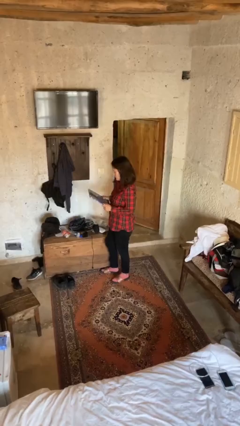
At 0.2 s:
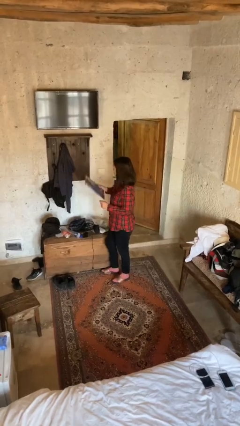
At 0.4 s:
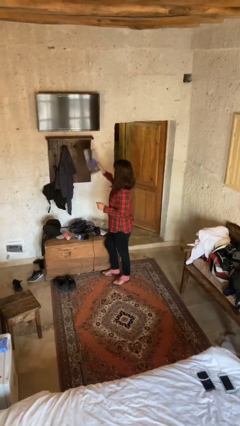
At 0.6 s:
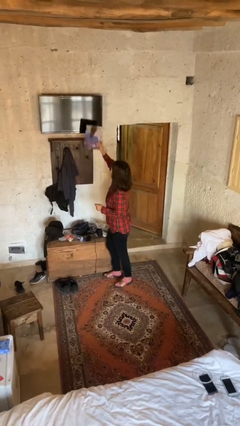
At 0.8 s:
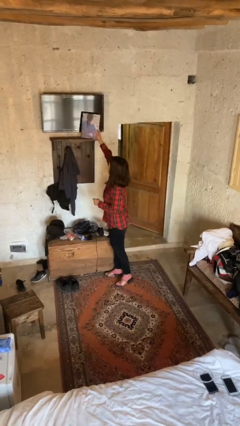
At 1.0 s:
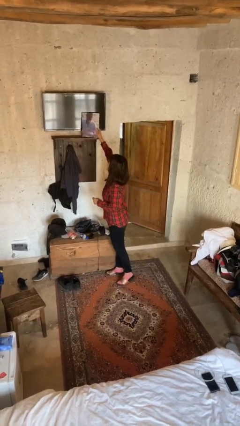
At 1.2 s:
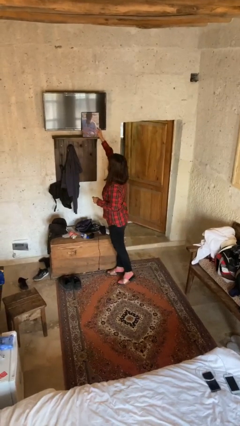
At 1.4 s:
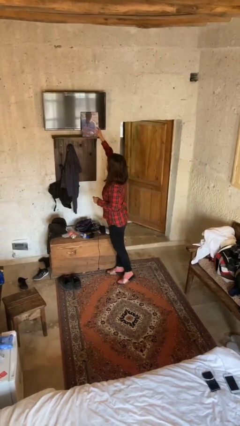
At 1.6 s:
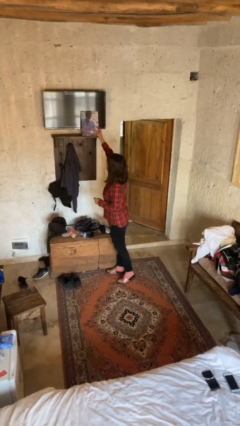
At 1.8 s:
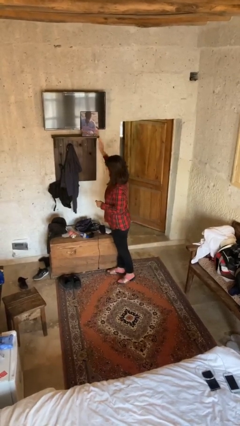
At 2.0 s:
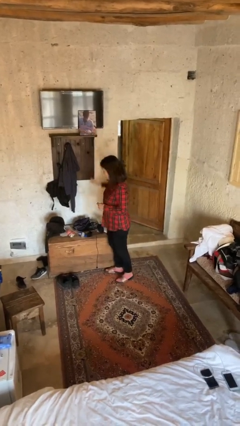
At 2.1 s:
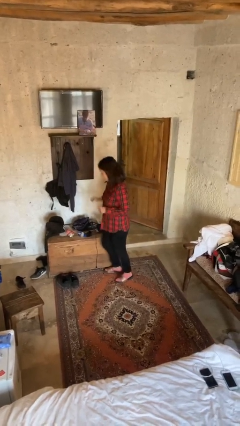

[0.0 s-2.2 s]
person puts down object on shelf

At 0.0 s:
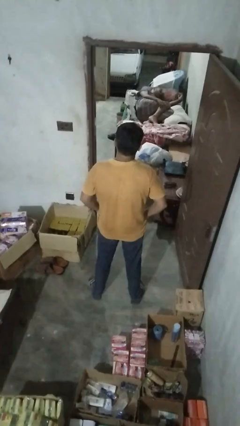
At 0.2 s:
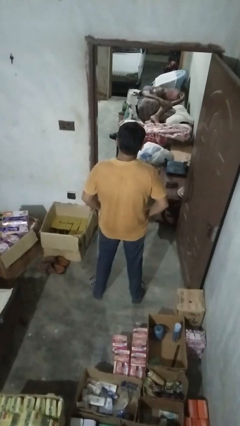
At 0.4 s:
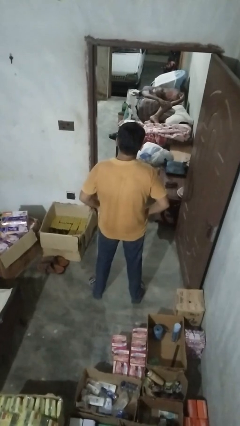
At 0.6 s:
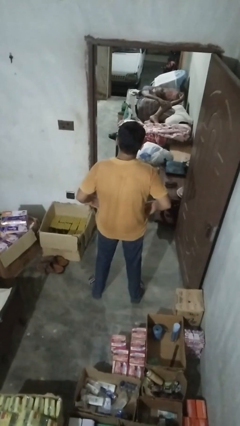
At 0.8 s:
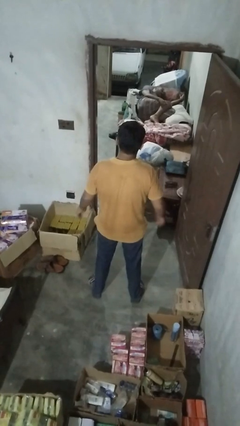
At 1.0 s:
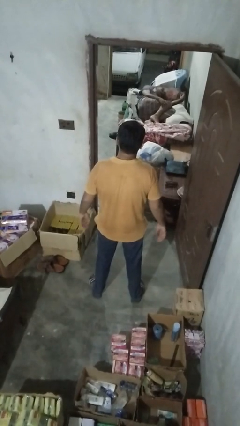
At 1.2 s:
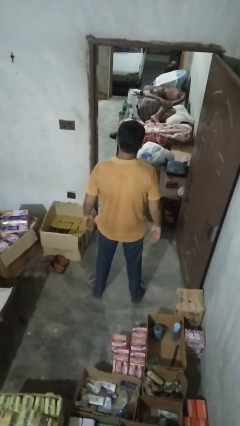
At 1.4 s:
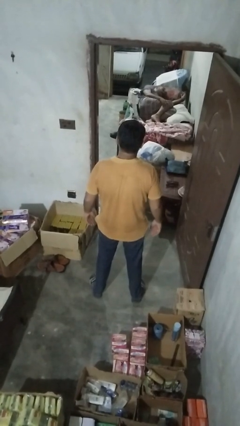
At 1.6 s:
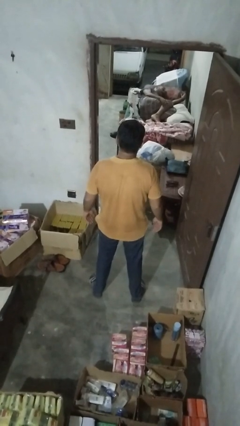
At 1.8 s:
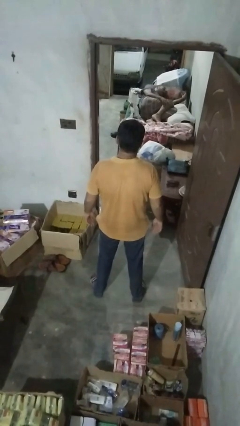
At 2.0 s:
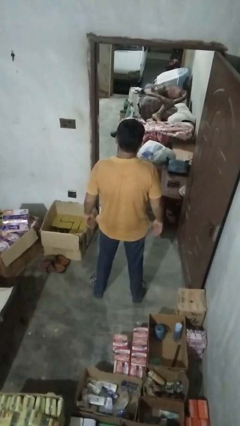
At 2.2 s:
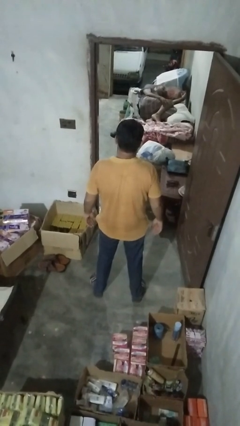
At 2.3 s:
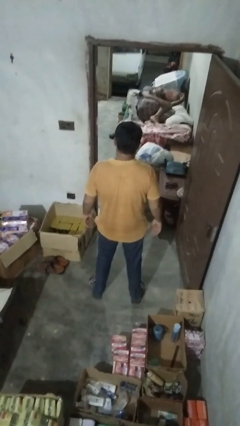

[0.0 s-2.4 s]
person puts hands in back pockets

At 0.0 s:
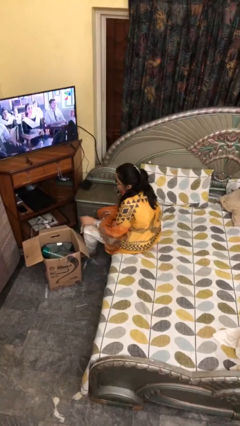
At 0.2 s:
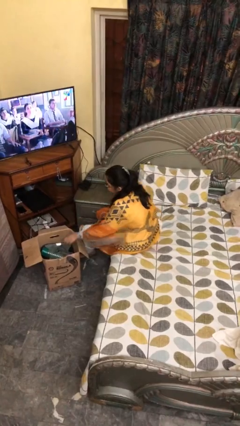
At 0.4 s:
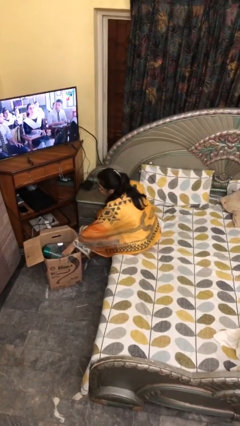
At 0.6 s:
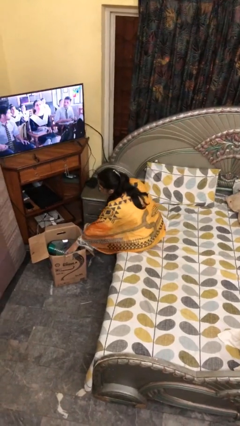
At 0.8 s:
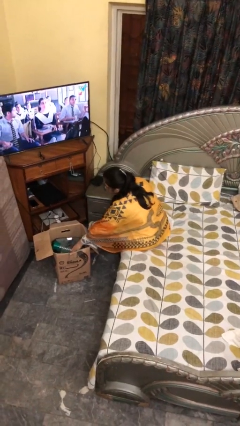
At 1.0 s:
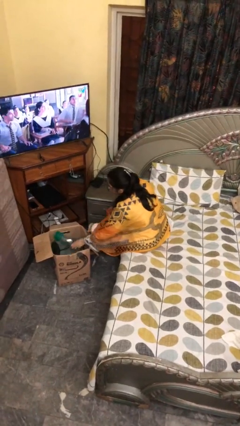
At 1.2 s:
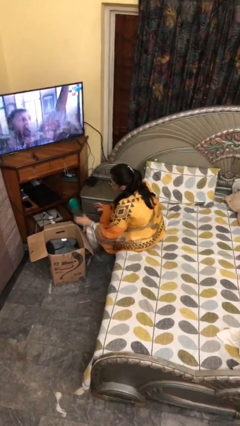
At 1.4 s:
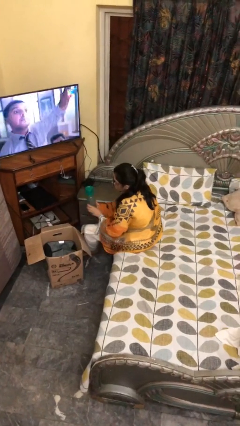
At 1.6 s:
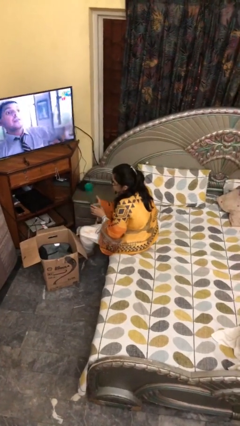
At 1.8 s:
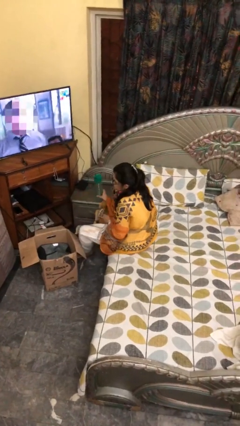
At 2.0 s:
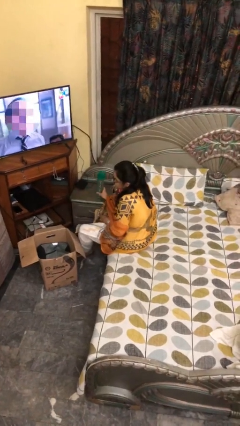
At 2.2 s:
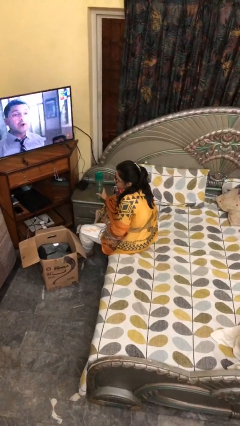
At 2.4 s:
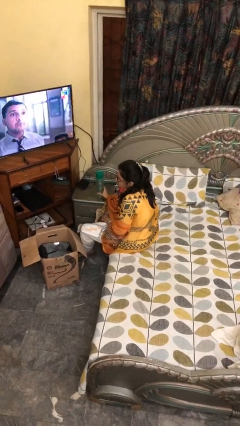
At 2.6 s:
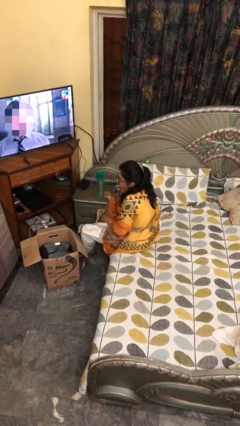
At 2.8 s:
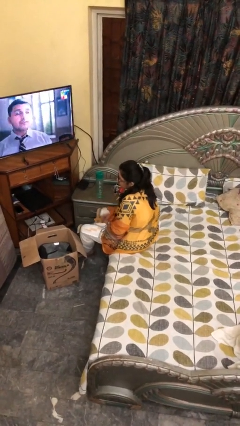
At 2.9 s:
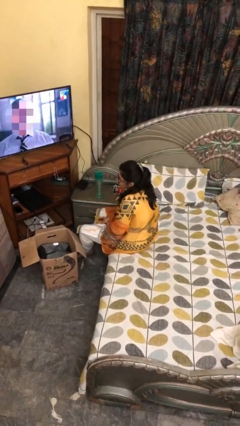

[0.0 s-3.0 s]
person takes object from box

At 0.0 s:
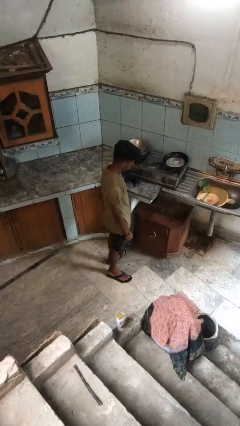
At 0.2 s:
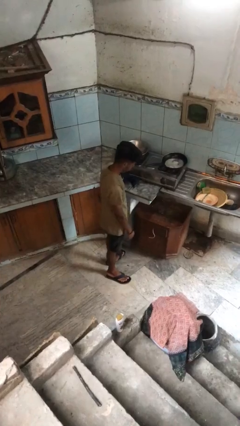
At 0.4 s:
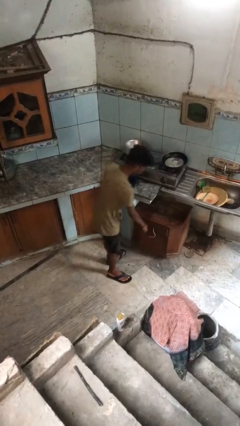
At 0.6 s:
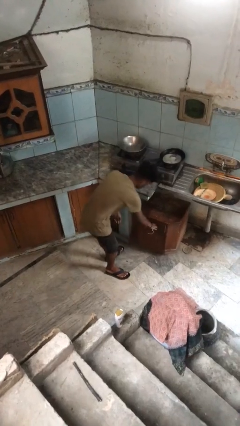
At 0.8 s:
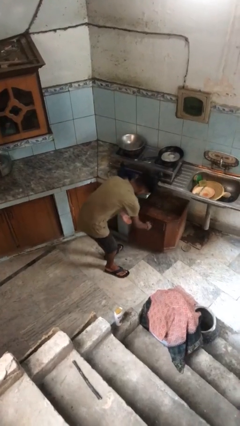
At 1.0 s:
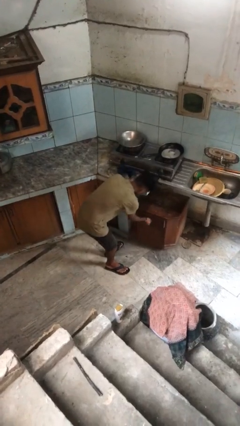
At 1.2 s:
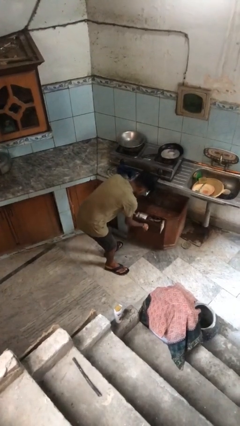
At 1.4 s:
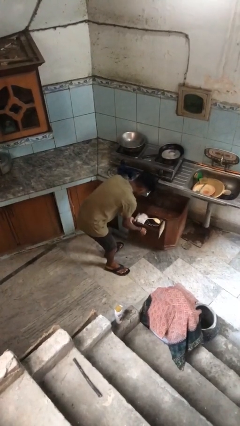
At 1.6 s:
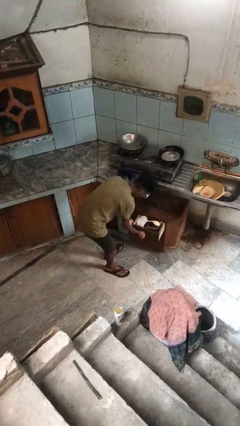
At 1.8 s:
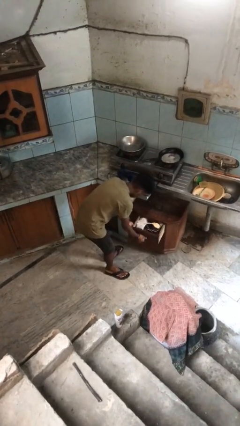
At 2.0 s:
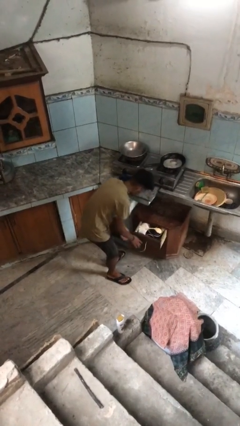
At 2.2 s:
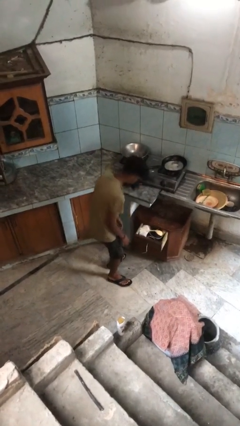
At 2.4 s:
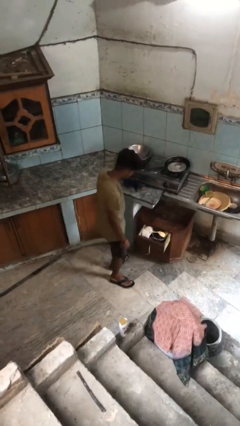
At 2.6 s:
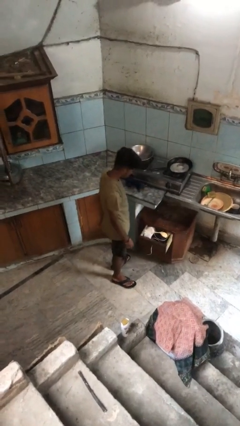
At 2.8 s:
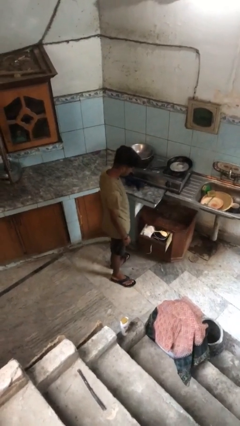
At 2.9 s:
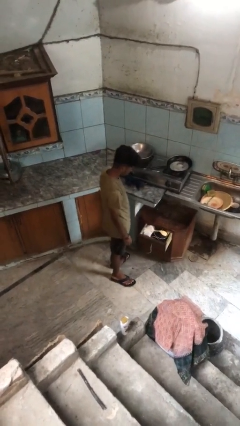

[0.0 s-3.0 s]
person opens kitchen drawer

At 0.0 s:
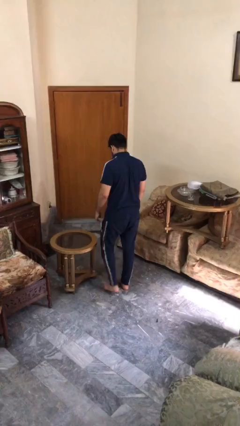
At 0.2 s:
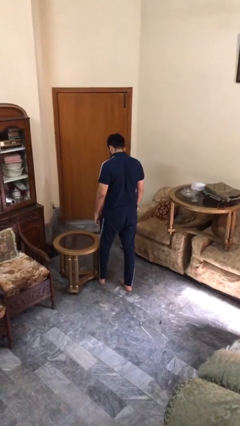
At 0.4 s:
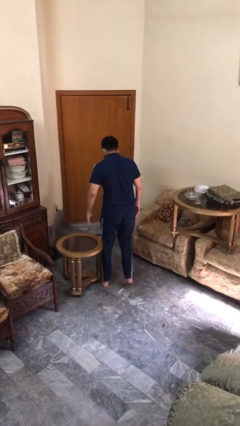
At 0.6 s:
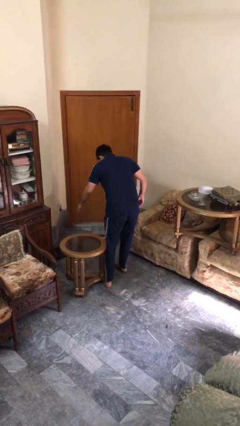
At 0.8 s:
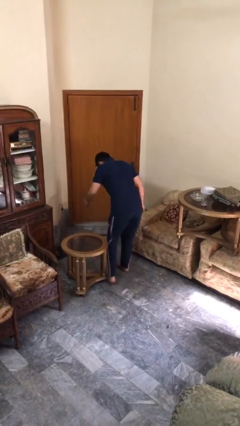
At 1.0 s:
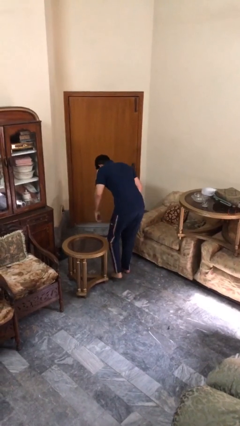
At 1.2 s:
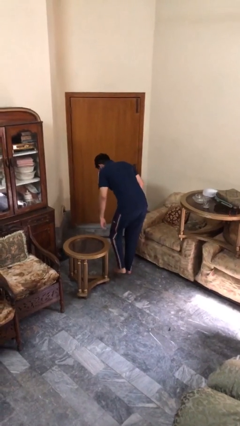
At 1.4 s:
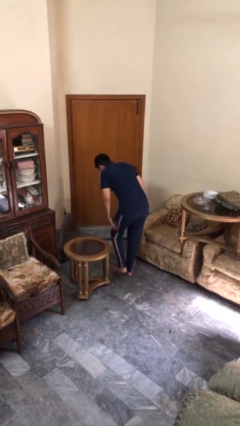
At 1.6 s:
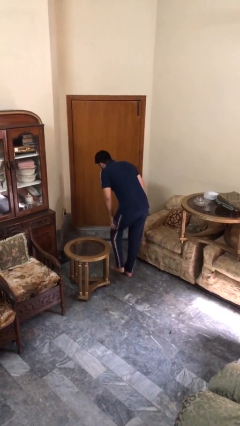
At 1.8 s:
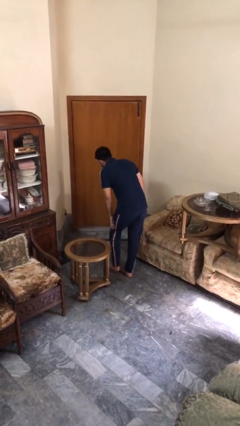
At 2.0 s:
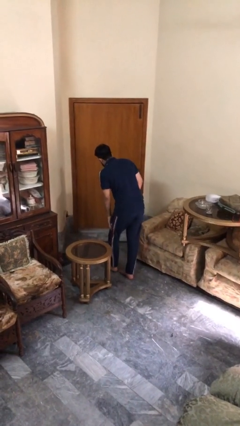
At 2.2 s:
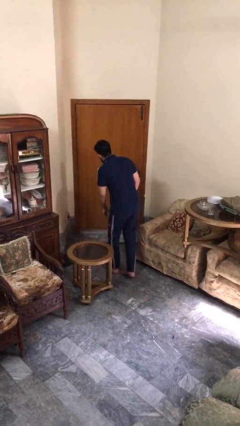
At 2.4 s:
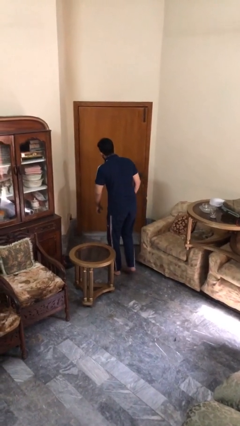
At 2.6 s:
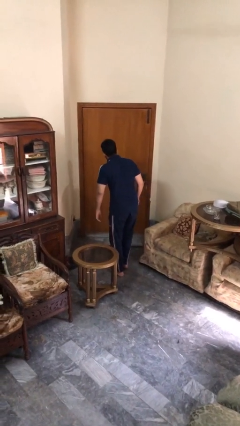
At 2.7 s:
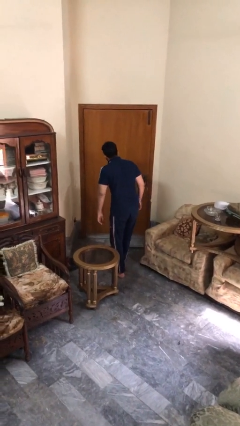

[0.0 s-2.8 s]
person stubs toe

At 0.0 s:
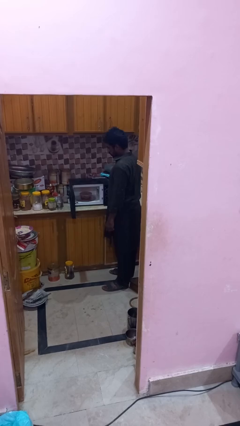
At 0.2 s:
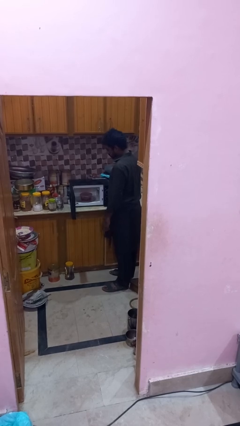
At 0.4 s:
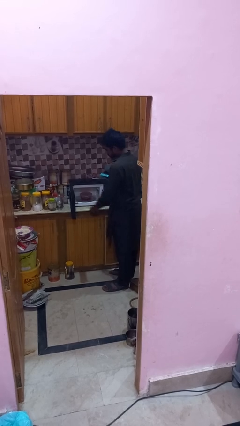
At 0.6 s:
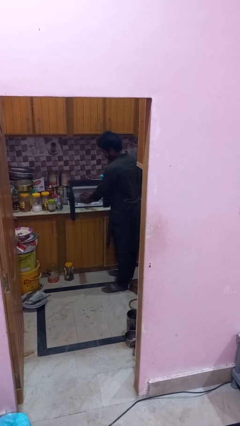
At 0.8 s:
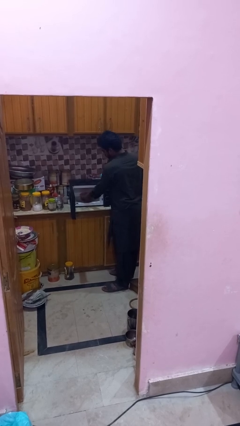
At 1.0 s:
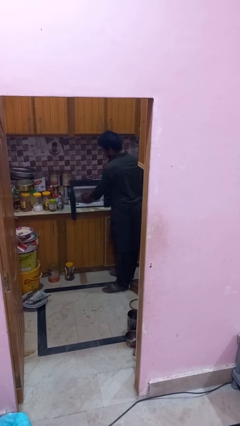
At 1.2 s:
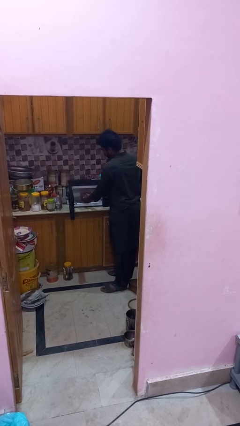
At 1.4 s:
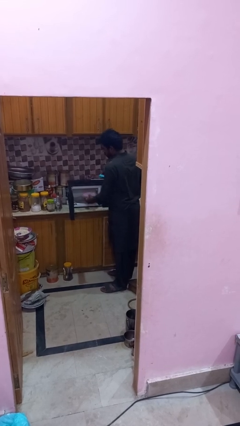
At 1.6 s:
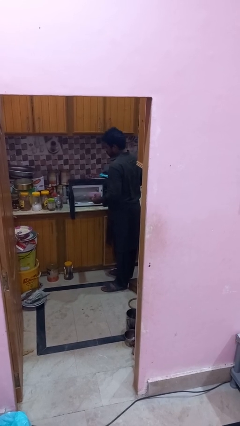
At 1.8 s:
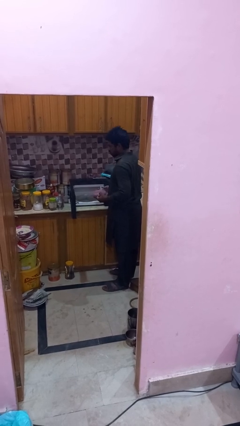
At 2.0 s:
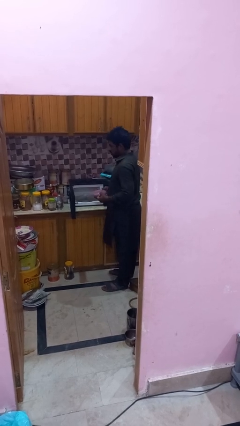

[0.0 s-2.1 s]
person takes object from microwave

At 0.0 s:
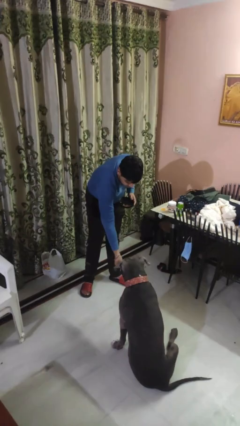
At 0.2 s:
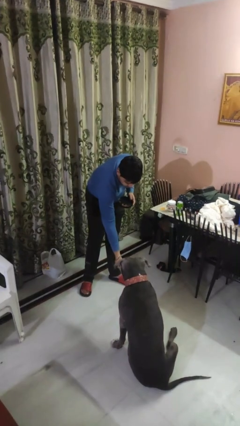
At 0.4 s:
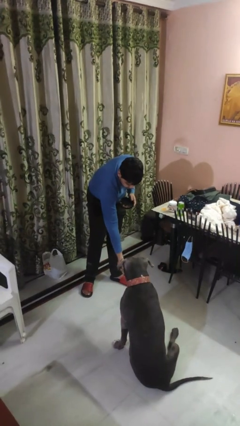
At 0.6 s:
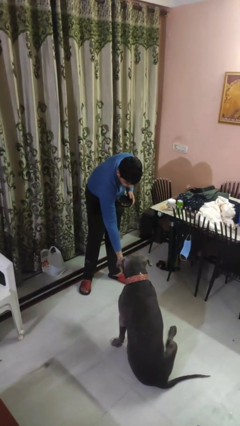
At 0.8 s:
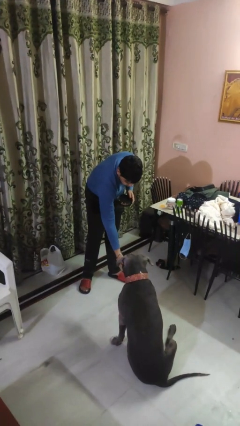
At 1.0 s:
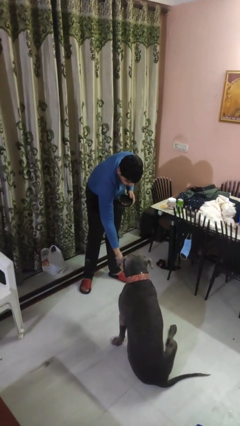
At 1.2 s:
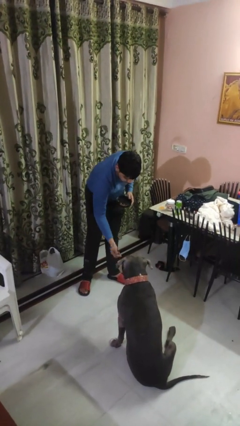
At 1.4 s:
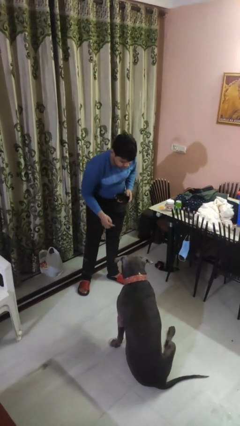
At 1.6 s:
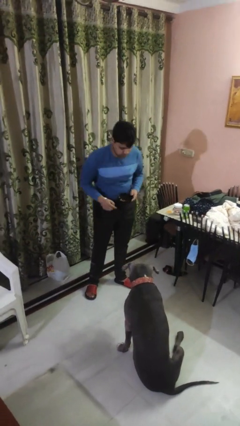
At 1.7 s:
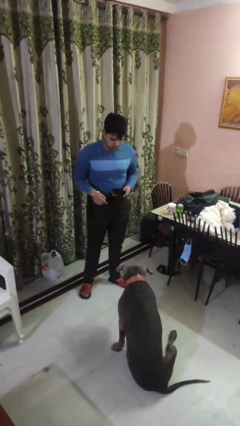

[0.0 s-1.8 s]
person feeds dog
